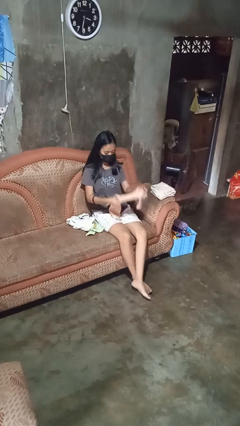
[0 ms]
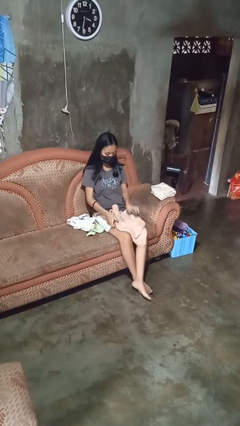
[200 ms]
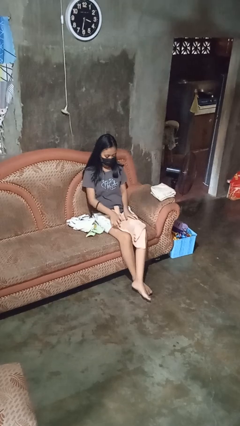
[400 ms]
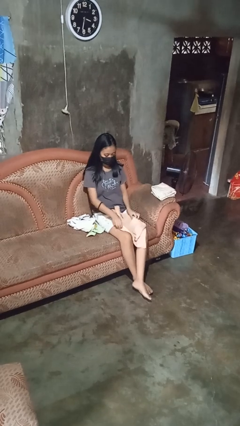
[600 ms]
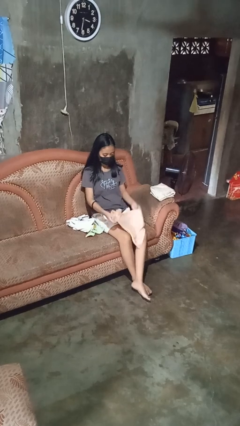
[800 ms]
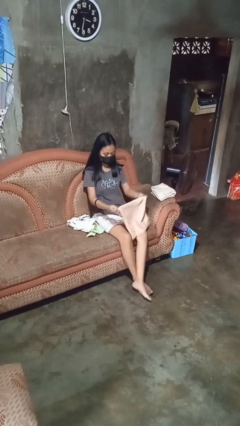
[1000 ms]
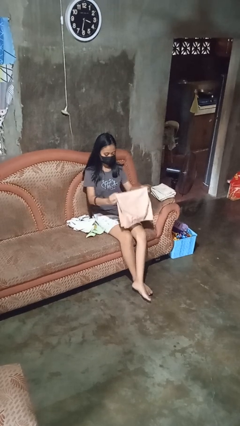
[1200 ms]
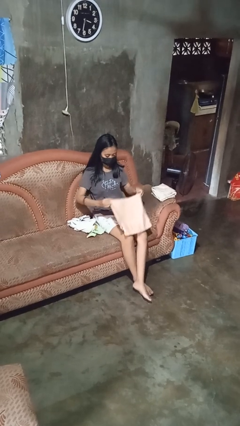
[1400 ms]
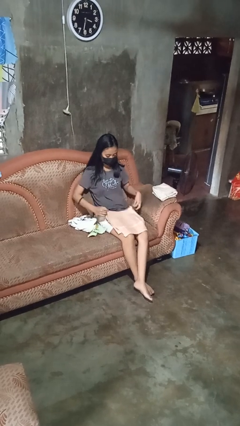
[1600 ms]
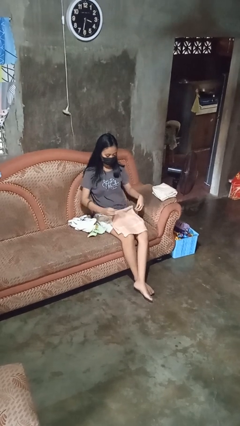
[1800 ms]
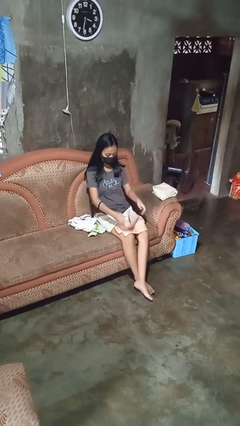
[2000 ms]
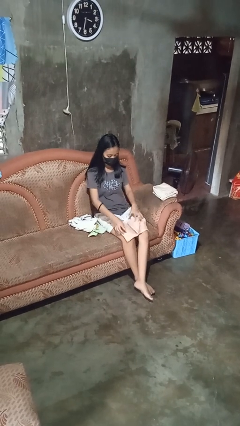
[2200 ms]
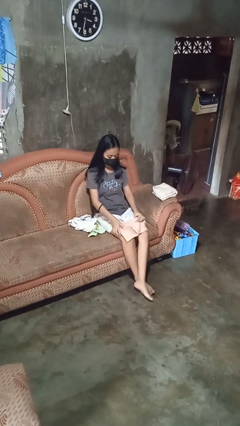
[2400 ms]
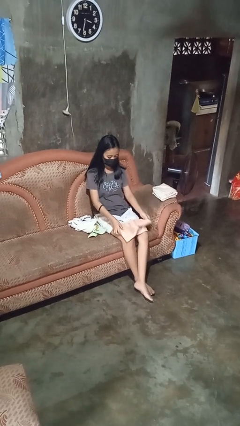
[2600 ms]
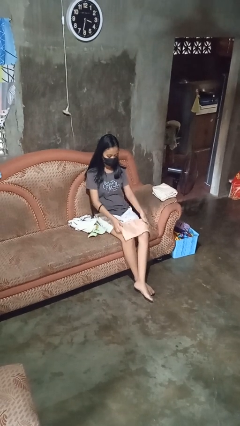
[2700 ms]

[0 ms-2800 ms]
person folds towel

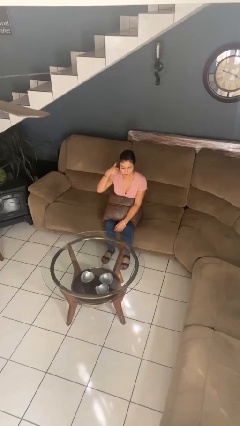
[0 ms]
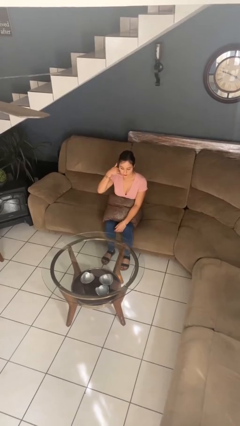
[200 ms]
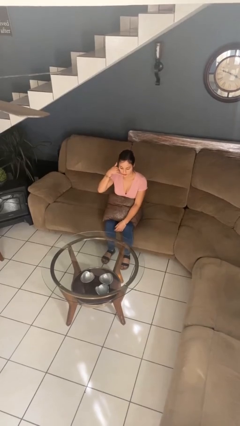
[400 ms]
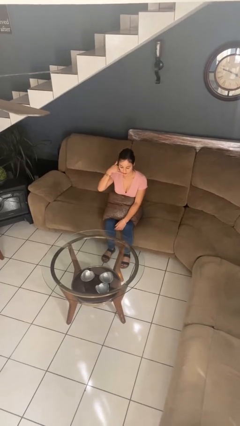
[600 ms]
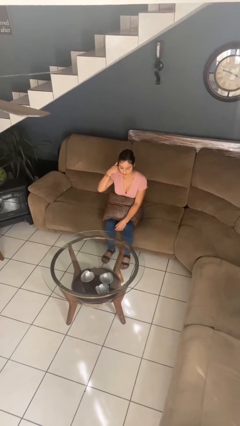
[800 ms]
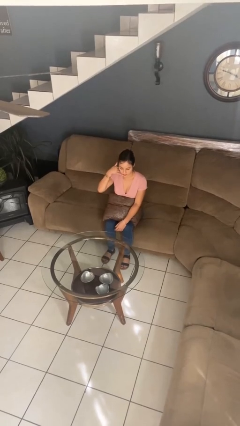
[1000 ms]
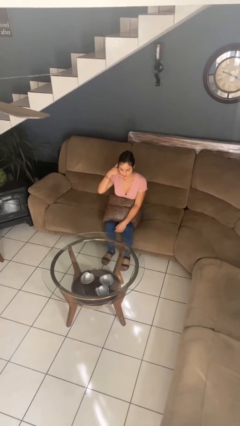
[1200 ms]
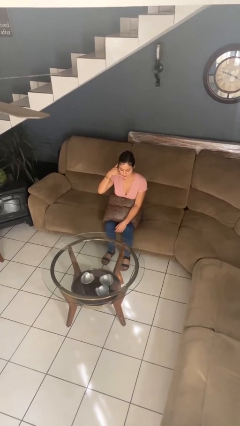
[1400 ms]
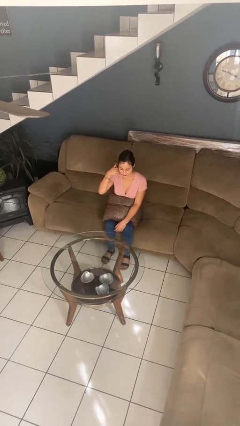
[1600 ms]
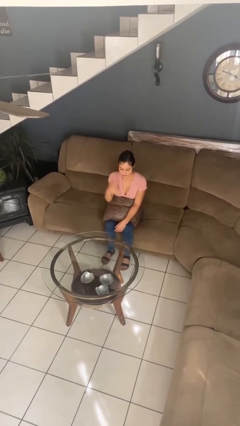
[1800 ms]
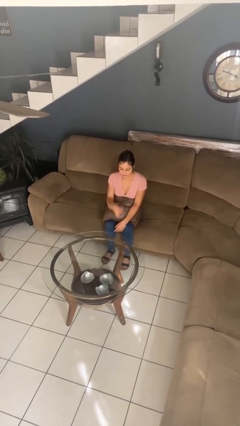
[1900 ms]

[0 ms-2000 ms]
person gestures call me

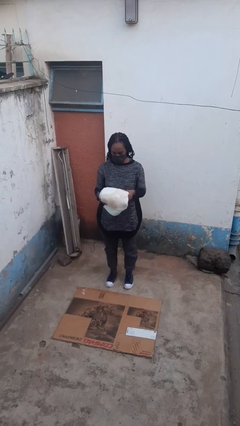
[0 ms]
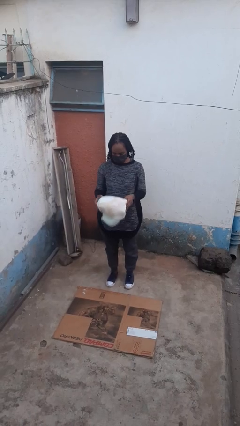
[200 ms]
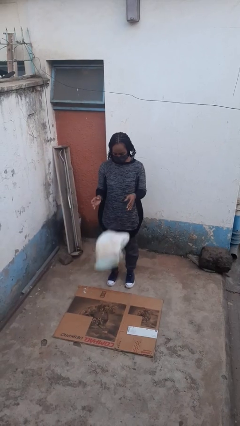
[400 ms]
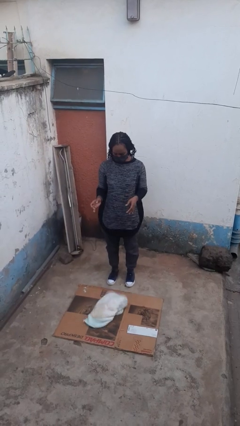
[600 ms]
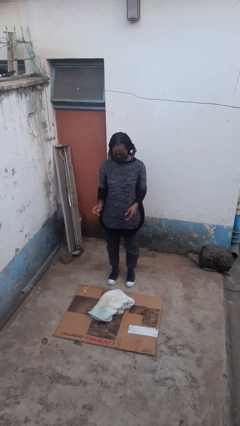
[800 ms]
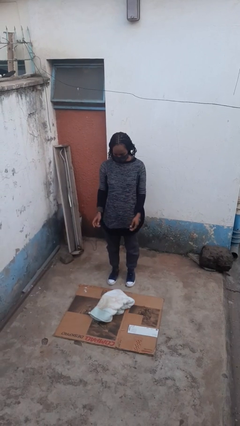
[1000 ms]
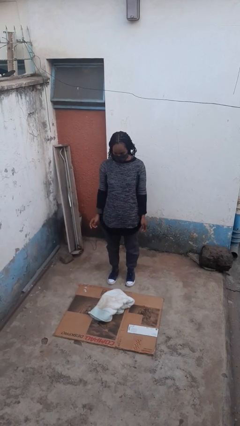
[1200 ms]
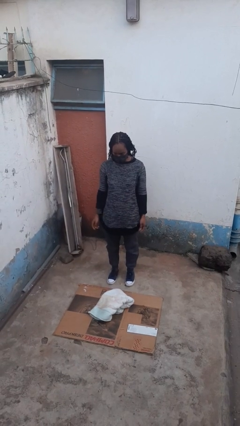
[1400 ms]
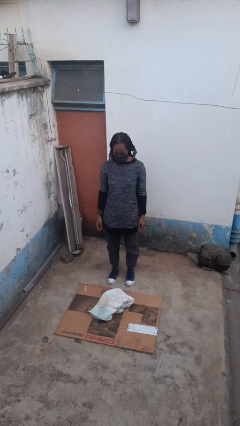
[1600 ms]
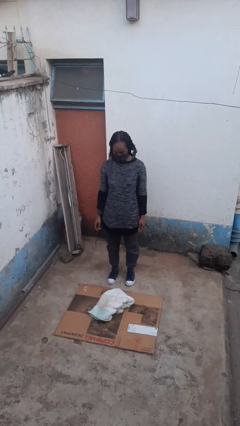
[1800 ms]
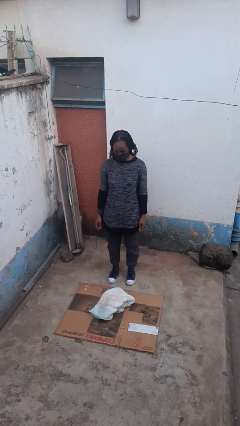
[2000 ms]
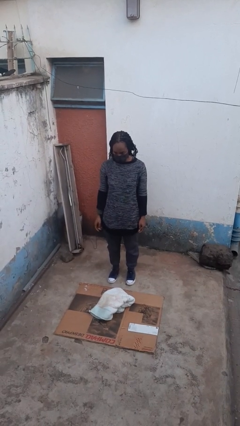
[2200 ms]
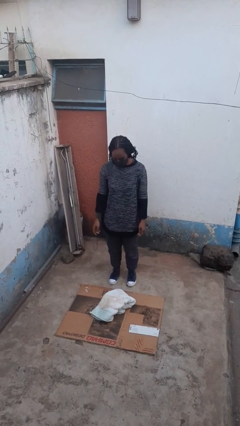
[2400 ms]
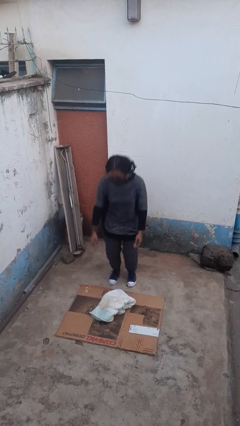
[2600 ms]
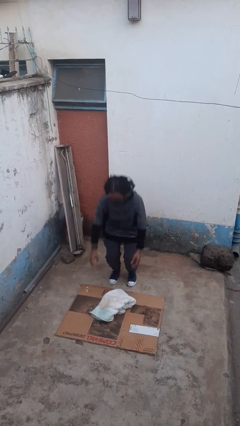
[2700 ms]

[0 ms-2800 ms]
person drops object

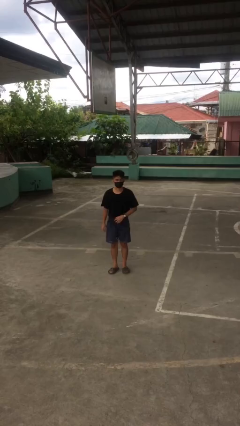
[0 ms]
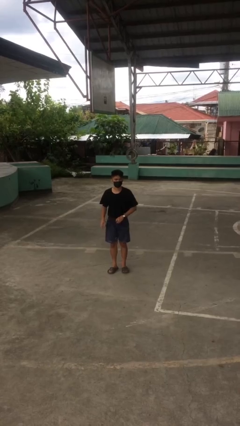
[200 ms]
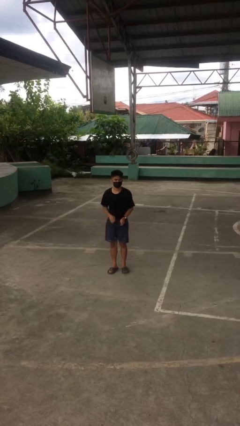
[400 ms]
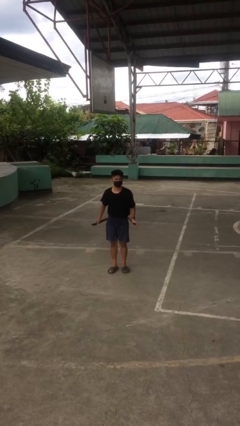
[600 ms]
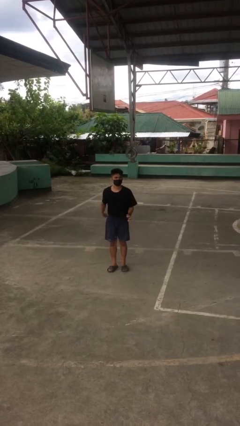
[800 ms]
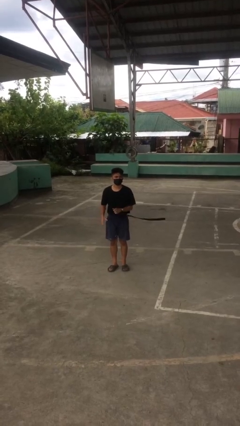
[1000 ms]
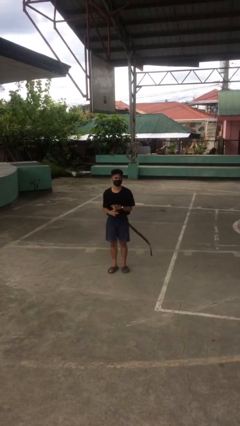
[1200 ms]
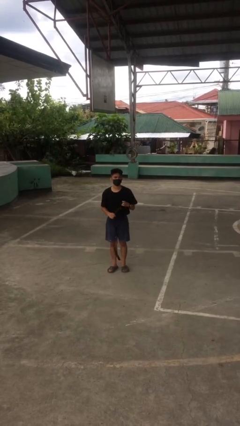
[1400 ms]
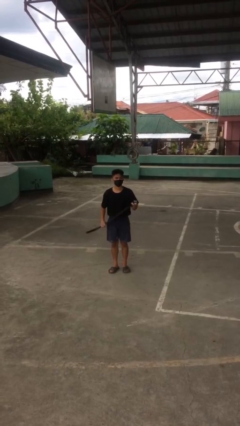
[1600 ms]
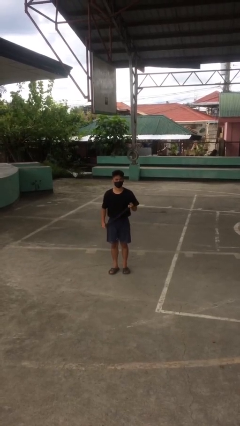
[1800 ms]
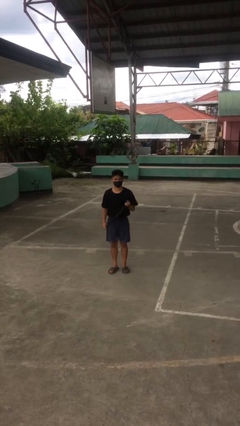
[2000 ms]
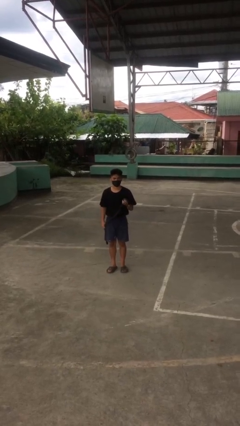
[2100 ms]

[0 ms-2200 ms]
person takes off belt

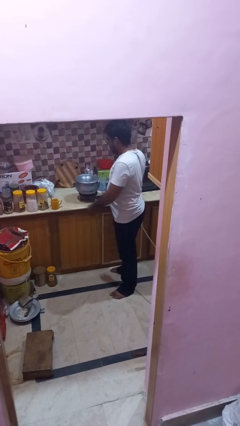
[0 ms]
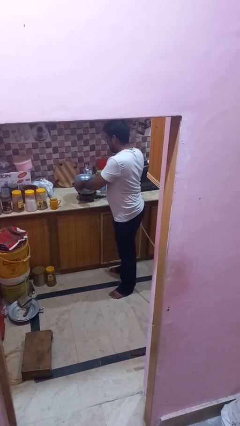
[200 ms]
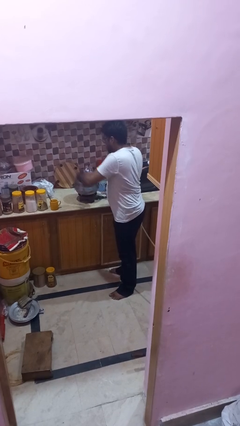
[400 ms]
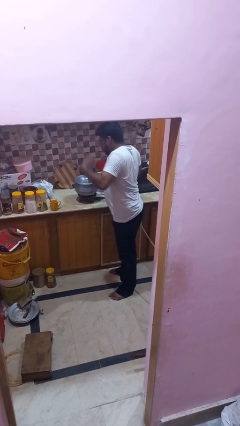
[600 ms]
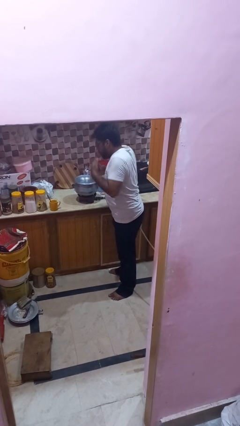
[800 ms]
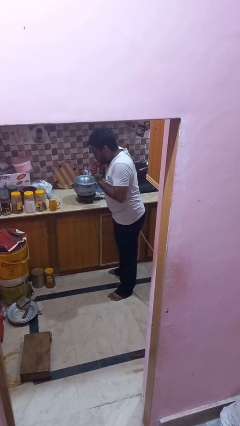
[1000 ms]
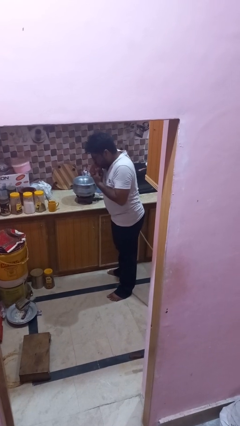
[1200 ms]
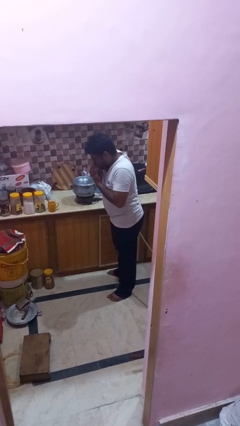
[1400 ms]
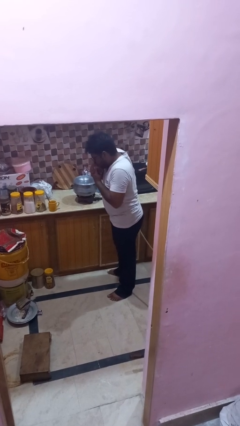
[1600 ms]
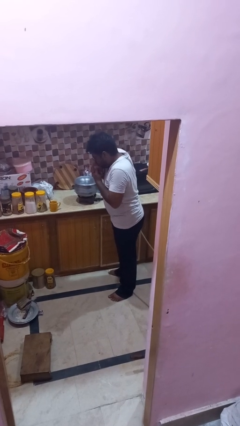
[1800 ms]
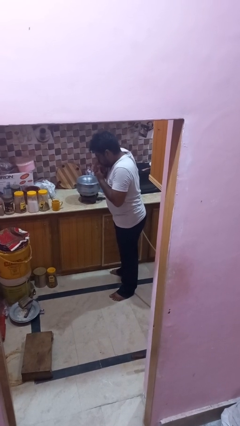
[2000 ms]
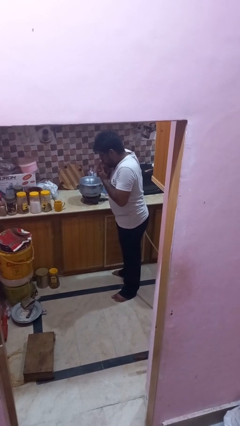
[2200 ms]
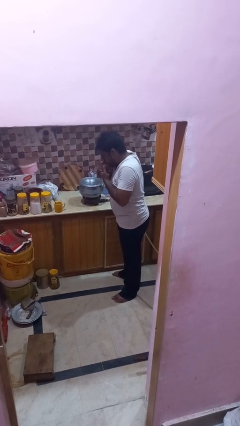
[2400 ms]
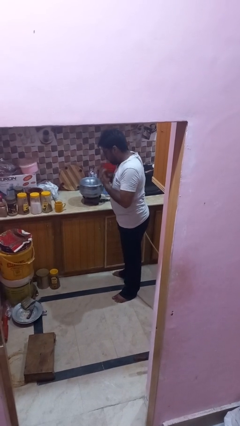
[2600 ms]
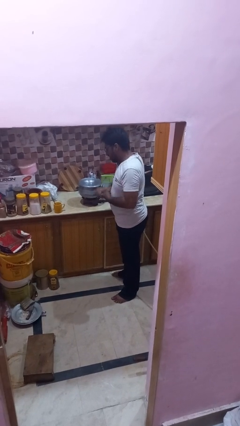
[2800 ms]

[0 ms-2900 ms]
person burns hand

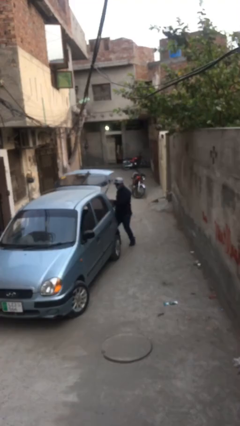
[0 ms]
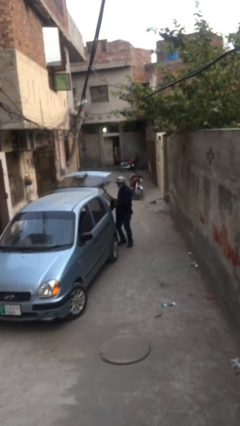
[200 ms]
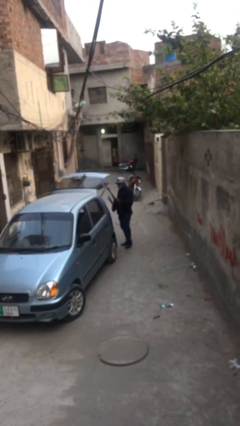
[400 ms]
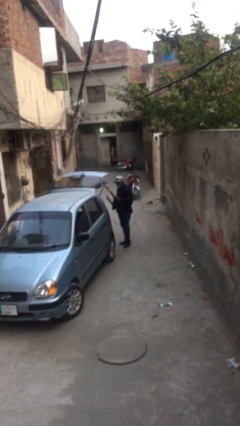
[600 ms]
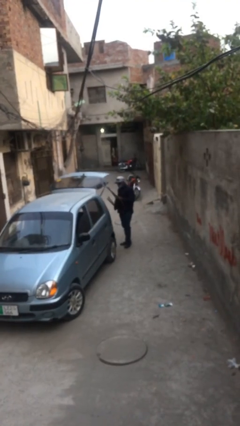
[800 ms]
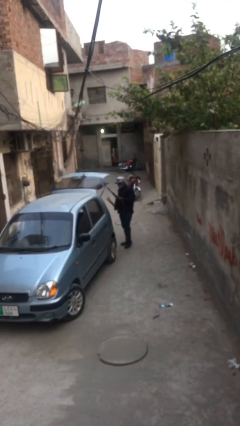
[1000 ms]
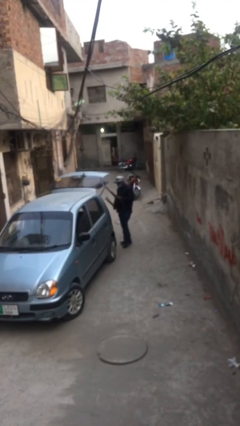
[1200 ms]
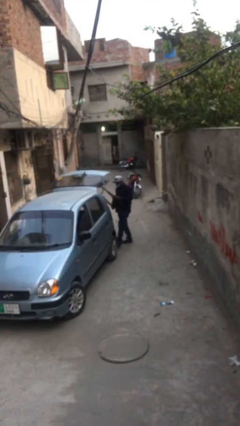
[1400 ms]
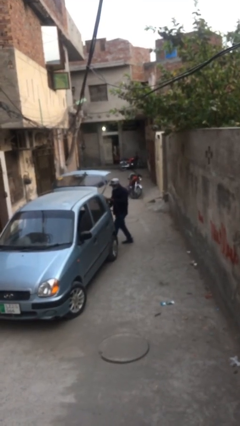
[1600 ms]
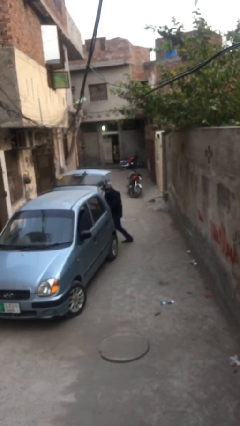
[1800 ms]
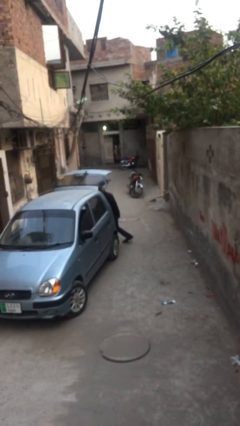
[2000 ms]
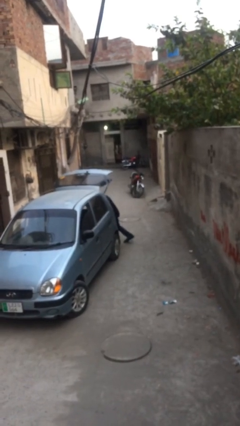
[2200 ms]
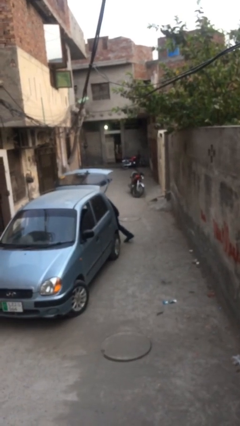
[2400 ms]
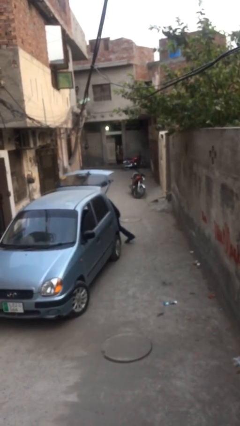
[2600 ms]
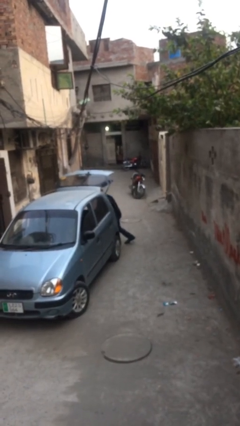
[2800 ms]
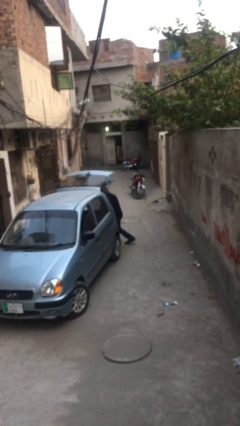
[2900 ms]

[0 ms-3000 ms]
person loads car

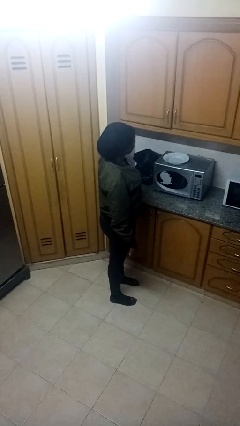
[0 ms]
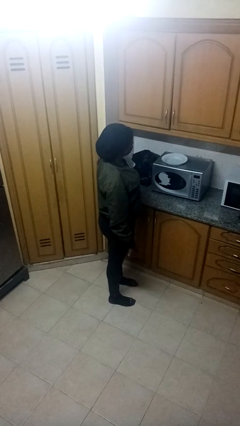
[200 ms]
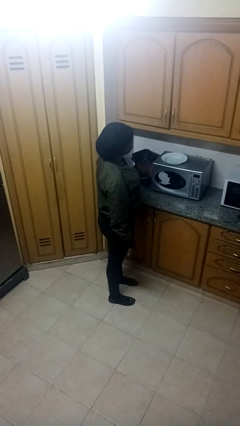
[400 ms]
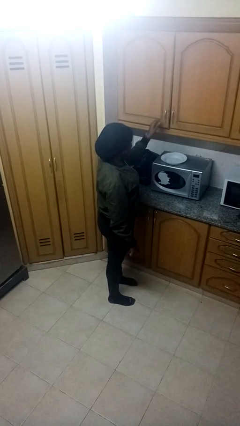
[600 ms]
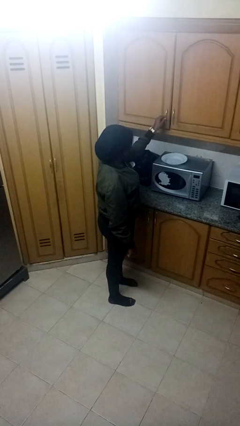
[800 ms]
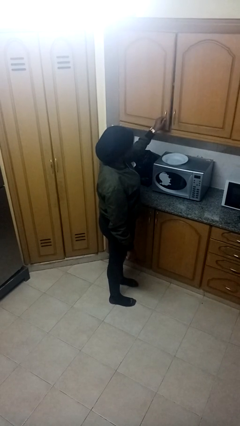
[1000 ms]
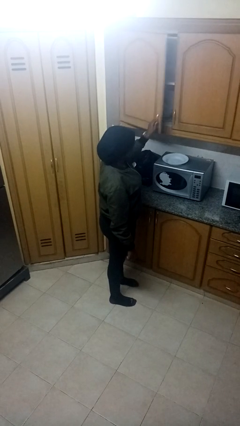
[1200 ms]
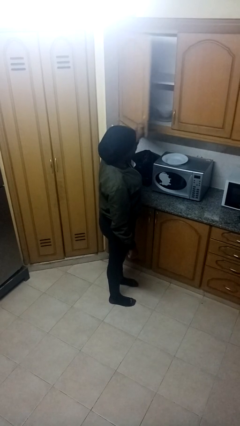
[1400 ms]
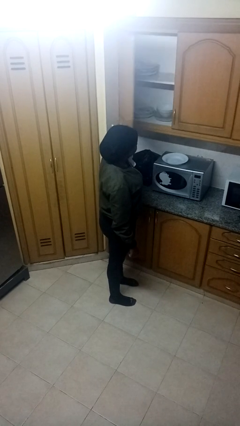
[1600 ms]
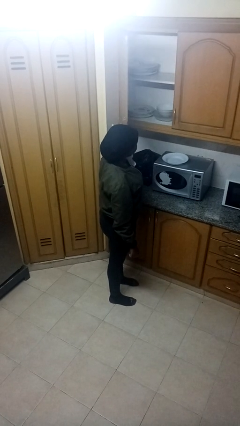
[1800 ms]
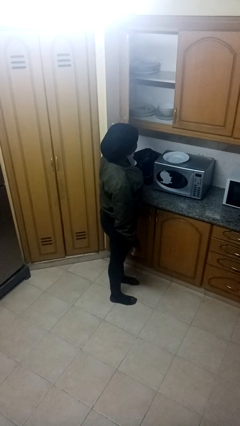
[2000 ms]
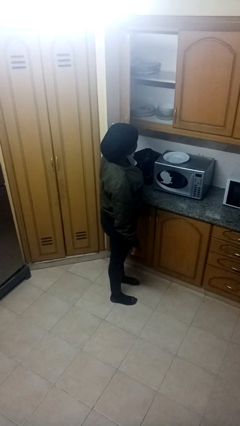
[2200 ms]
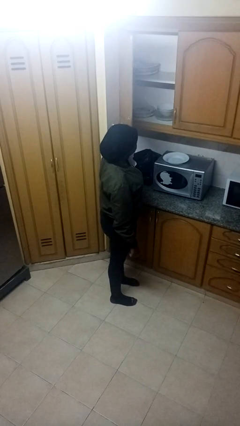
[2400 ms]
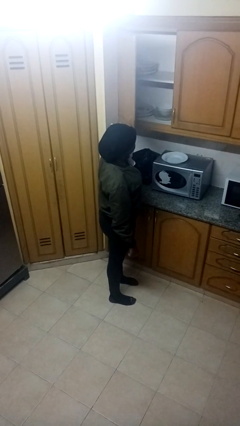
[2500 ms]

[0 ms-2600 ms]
person opens cabinet
